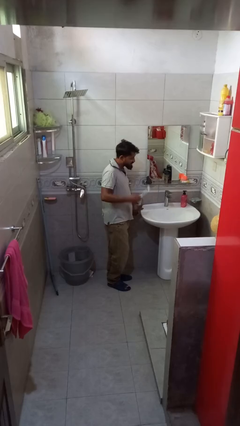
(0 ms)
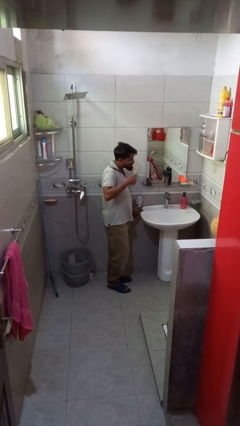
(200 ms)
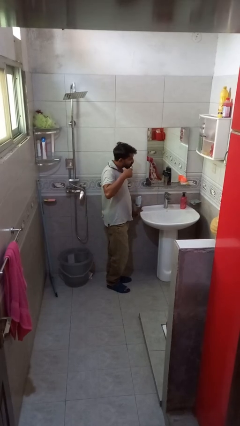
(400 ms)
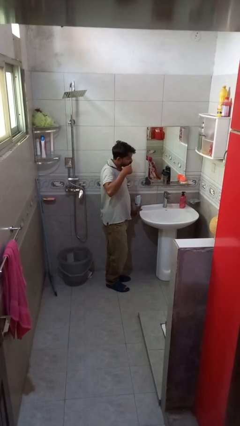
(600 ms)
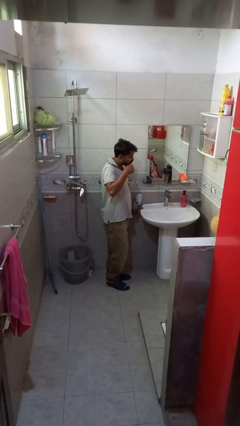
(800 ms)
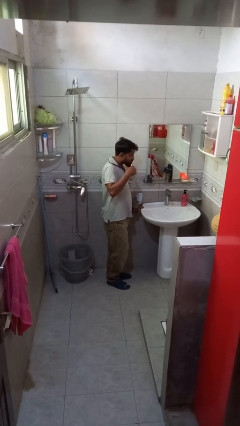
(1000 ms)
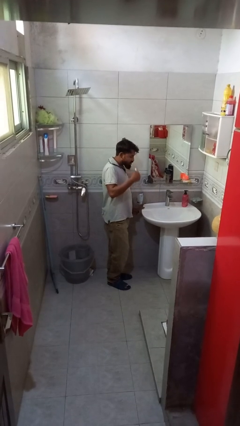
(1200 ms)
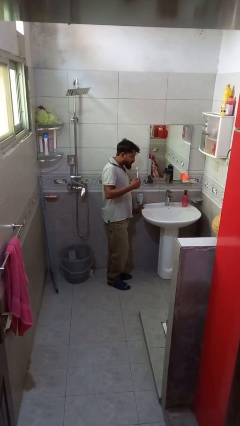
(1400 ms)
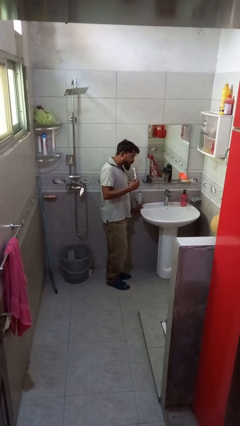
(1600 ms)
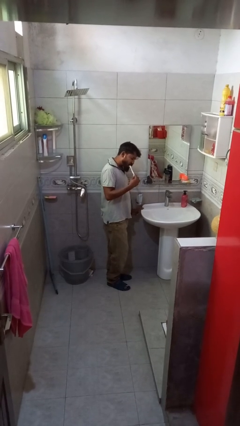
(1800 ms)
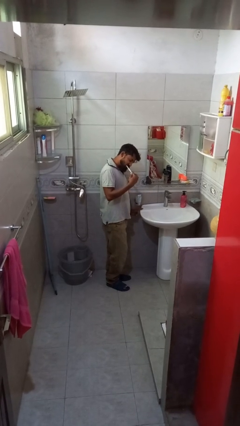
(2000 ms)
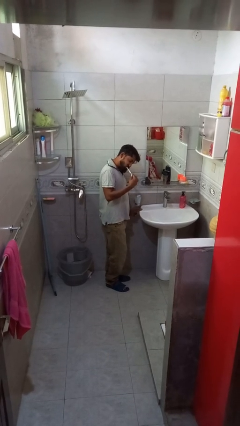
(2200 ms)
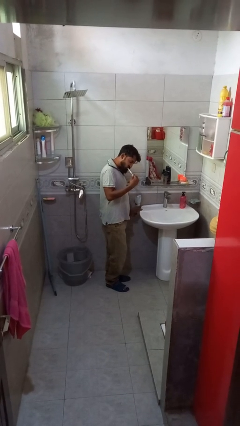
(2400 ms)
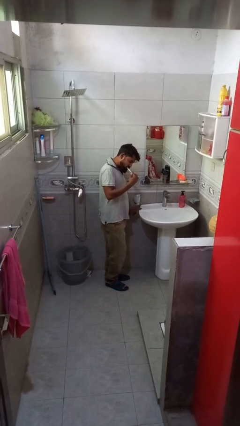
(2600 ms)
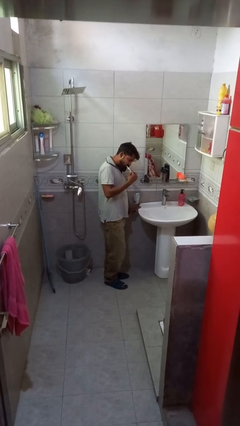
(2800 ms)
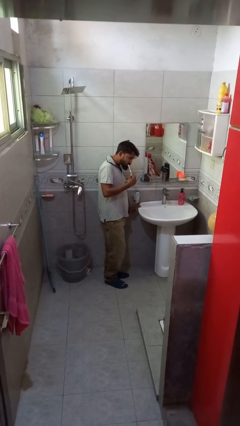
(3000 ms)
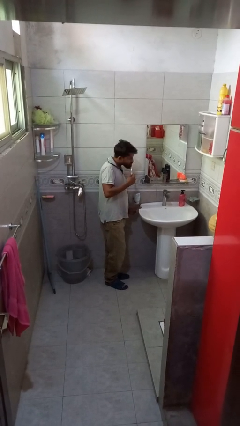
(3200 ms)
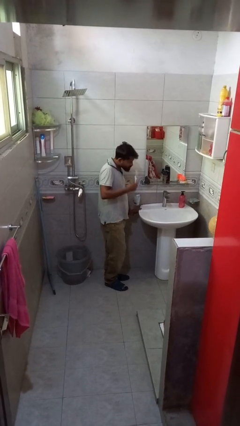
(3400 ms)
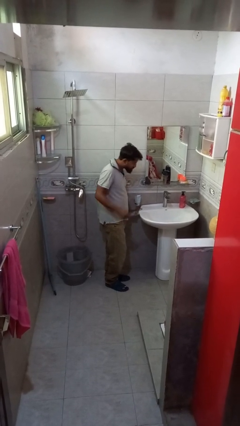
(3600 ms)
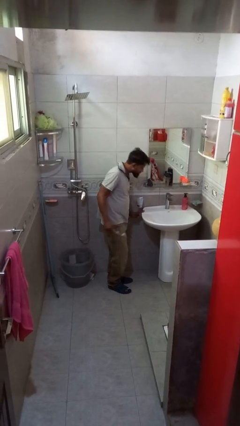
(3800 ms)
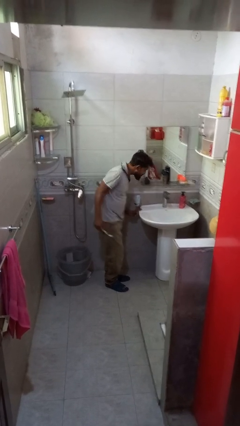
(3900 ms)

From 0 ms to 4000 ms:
person brushes teeth

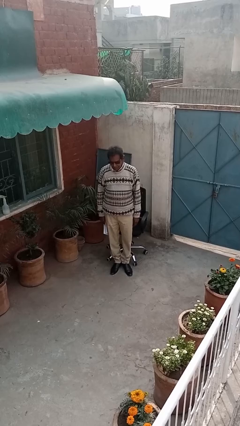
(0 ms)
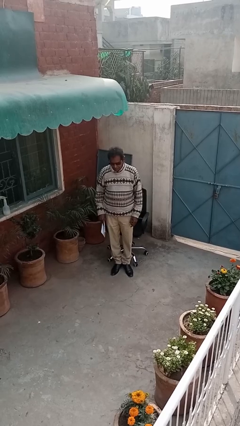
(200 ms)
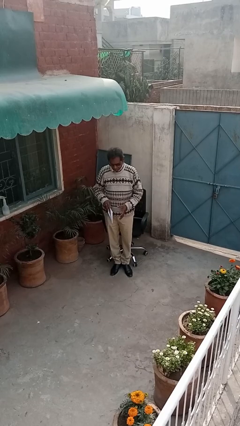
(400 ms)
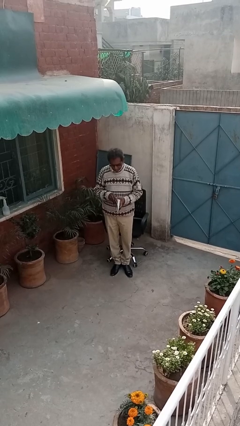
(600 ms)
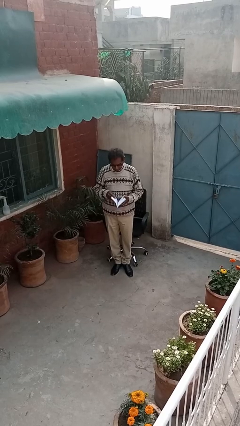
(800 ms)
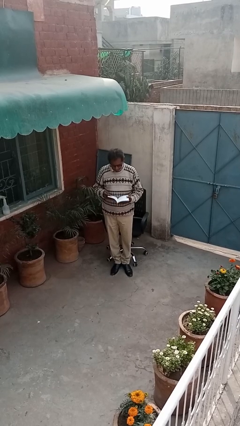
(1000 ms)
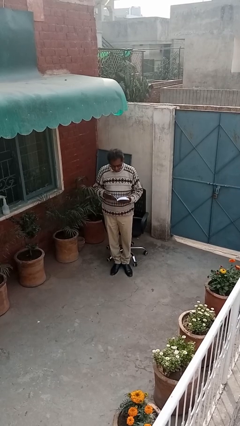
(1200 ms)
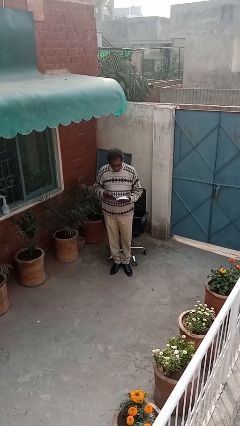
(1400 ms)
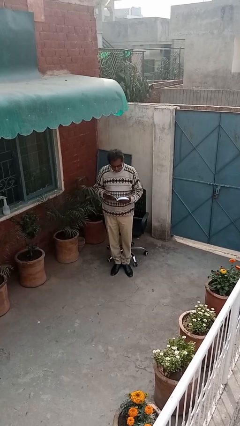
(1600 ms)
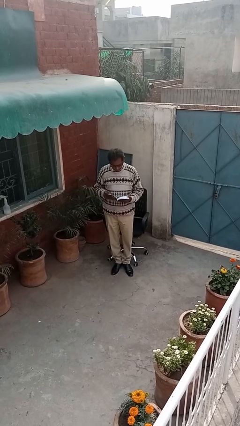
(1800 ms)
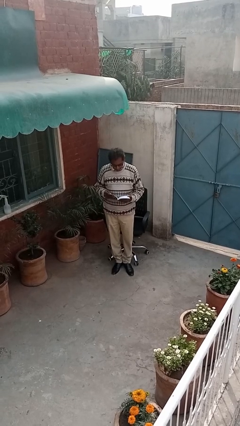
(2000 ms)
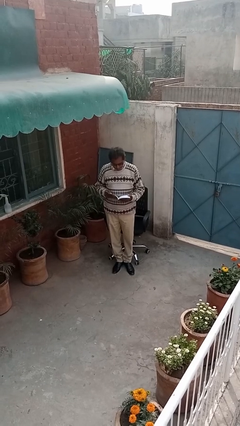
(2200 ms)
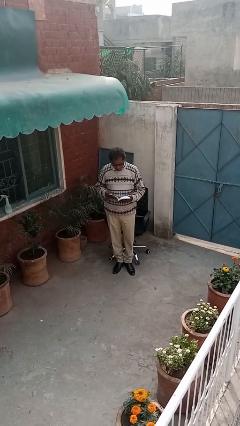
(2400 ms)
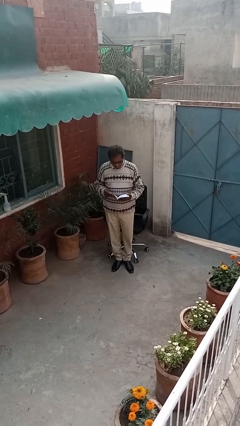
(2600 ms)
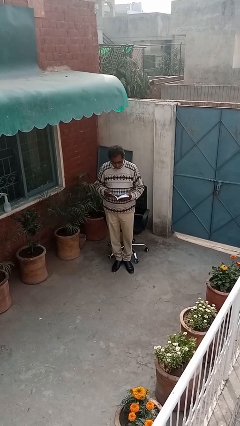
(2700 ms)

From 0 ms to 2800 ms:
person reads document

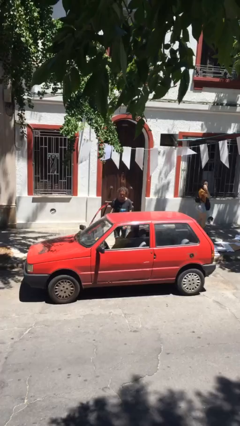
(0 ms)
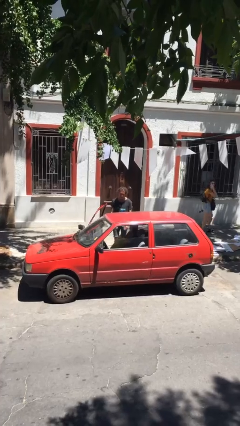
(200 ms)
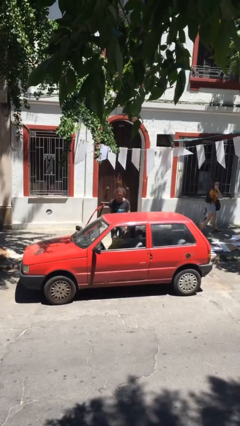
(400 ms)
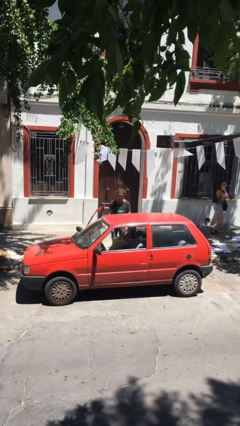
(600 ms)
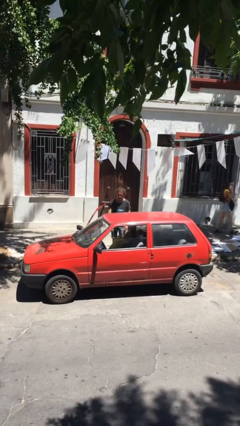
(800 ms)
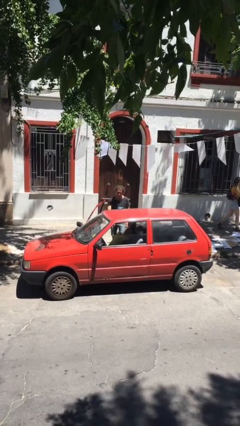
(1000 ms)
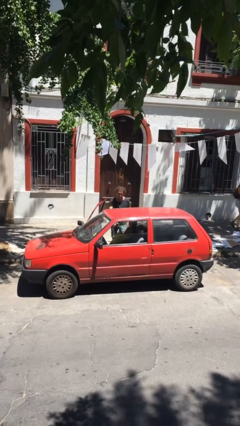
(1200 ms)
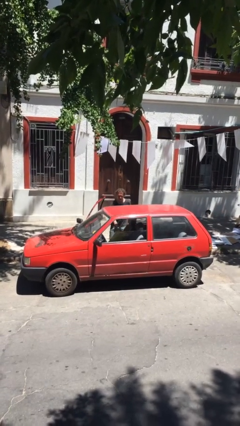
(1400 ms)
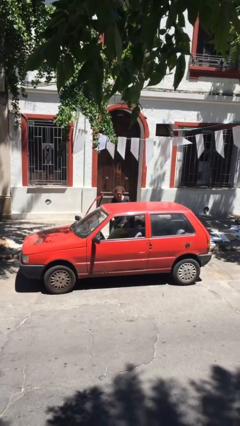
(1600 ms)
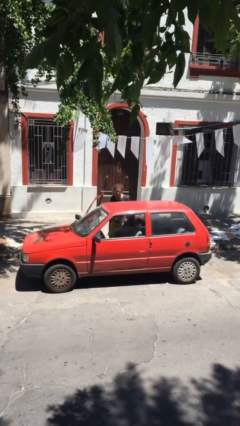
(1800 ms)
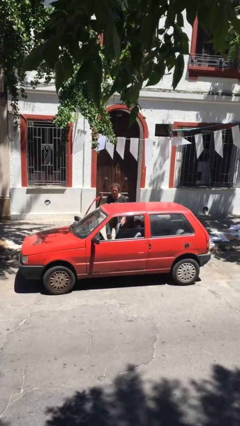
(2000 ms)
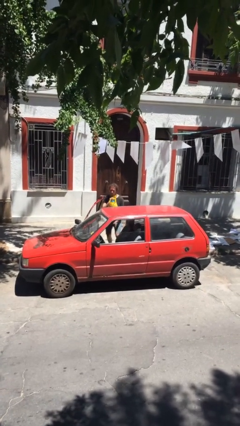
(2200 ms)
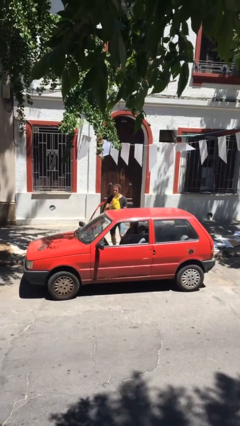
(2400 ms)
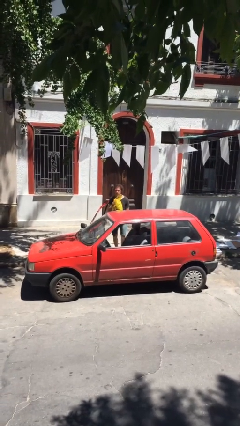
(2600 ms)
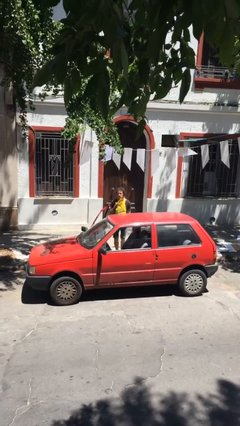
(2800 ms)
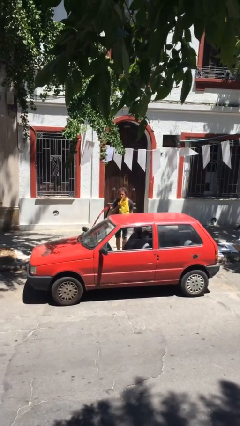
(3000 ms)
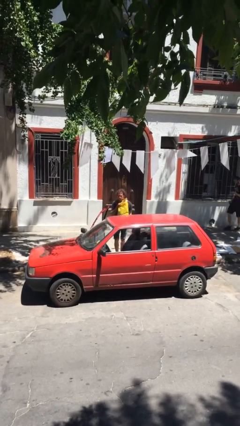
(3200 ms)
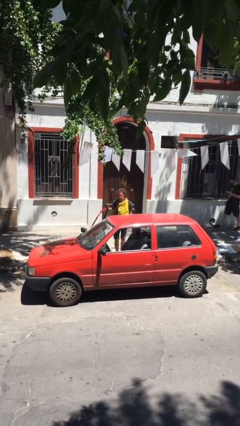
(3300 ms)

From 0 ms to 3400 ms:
person unloads car

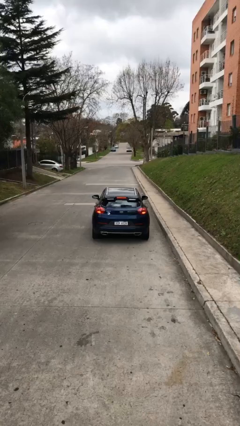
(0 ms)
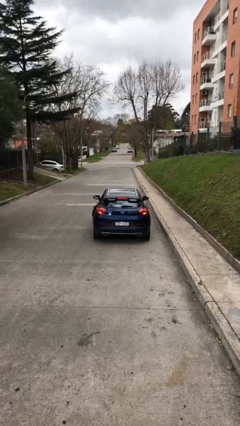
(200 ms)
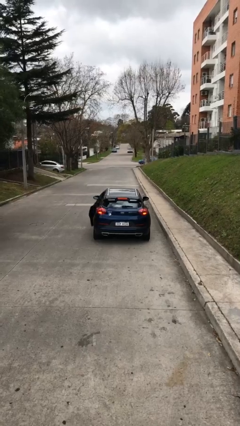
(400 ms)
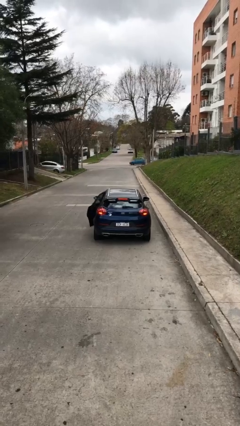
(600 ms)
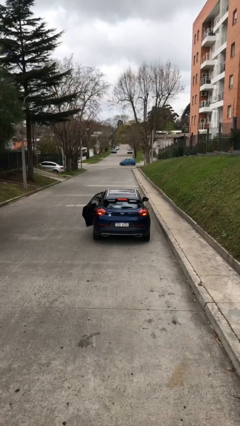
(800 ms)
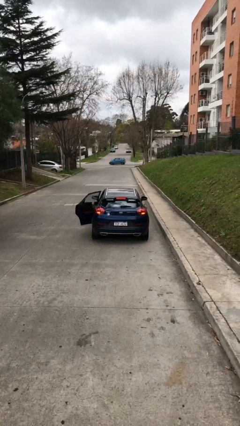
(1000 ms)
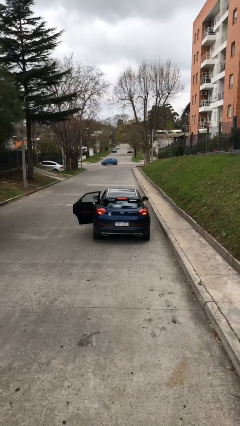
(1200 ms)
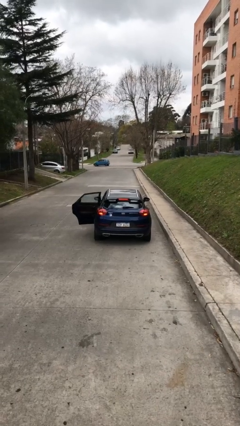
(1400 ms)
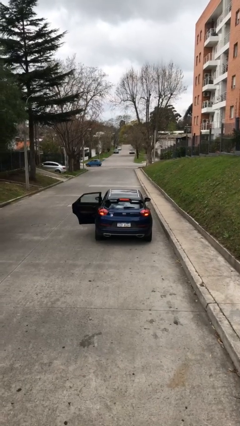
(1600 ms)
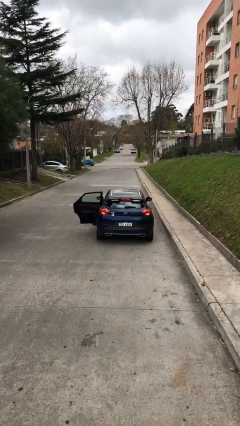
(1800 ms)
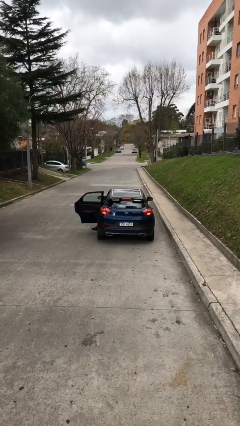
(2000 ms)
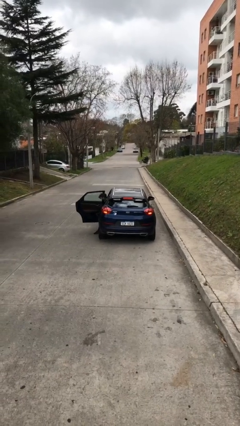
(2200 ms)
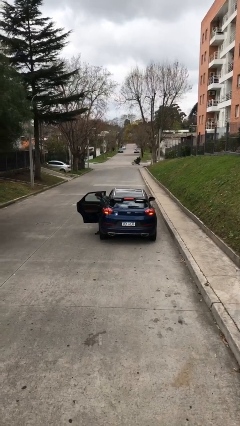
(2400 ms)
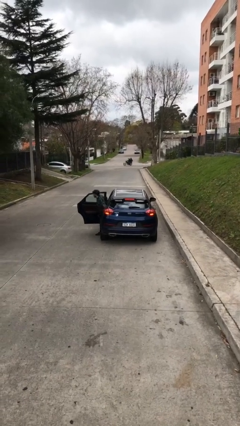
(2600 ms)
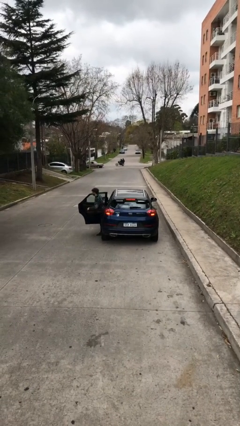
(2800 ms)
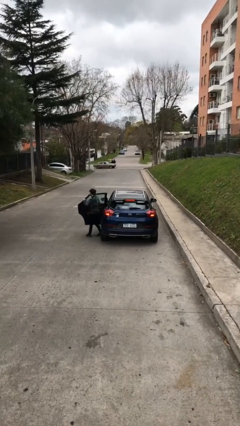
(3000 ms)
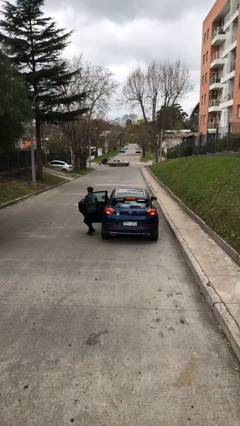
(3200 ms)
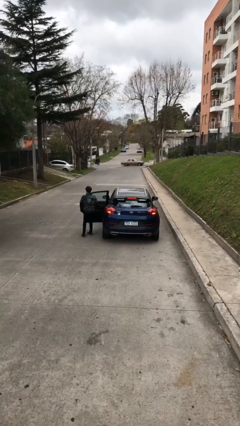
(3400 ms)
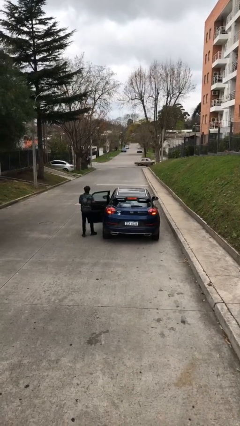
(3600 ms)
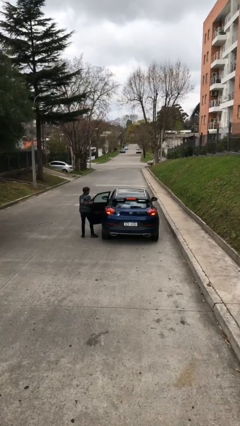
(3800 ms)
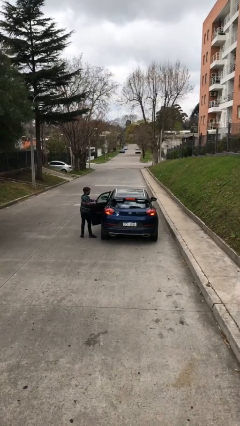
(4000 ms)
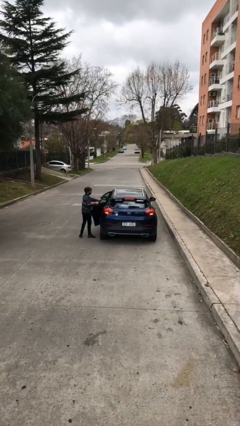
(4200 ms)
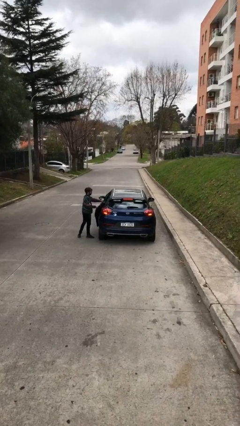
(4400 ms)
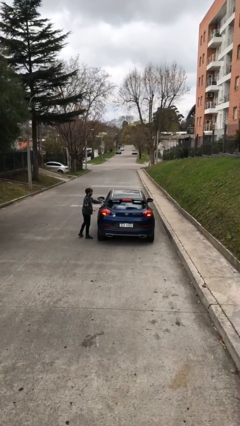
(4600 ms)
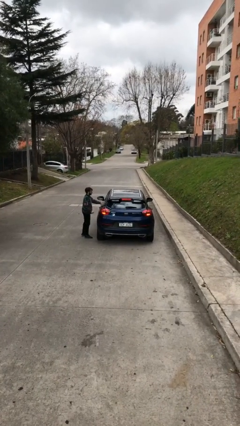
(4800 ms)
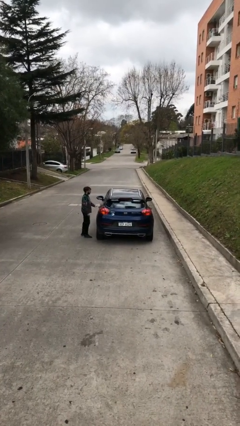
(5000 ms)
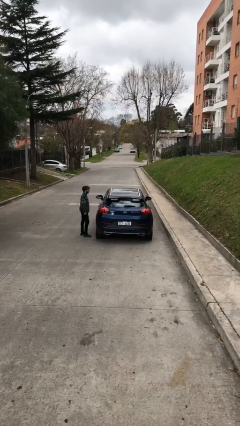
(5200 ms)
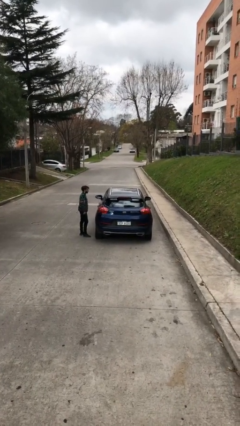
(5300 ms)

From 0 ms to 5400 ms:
car drops off person

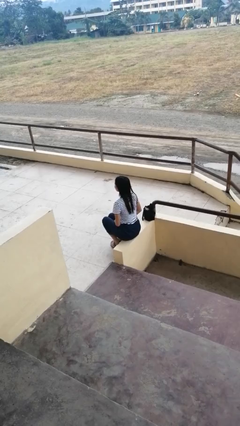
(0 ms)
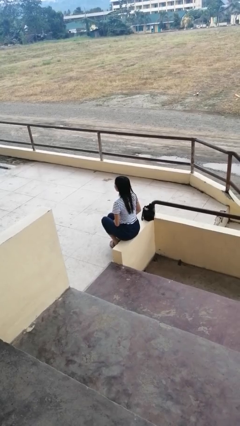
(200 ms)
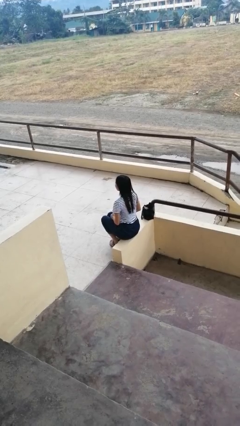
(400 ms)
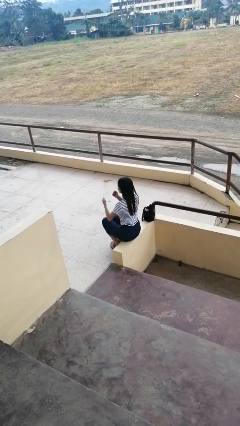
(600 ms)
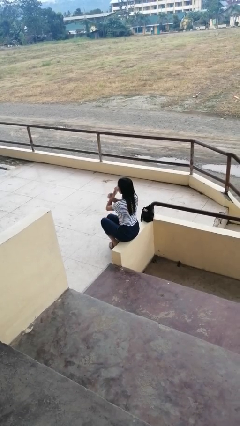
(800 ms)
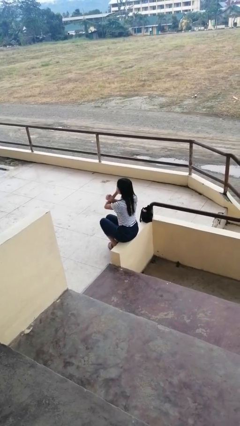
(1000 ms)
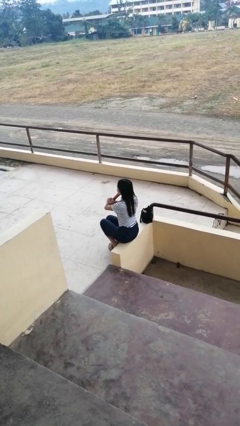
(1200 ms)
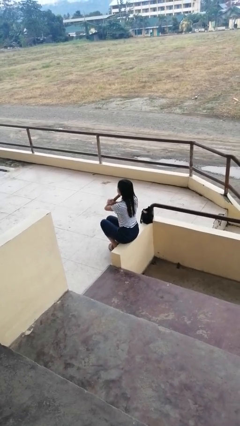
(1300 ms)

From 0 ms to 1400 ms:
person gestures arms x

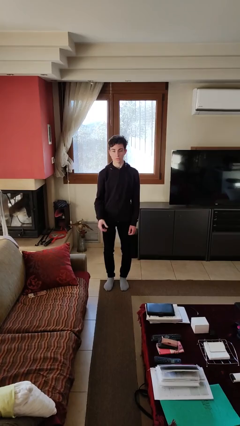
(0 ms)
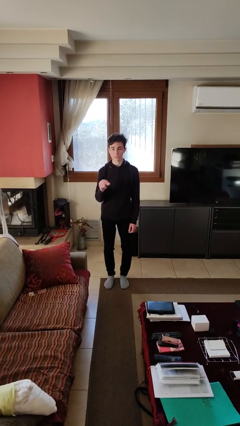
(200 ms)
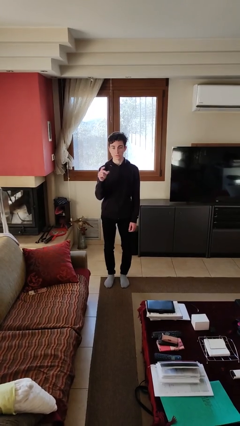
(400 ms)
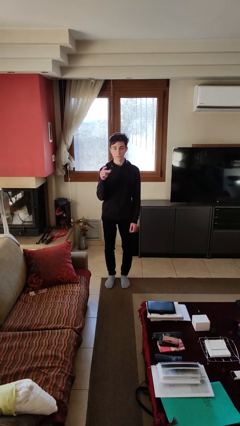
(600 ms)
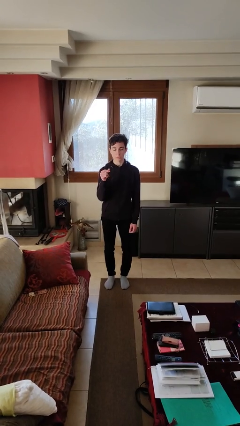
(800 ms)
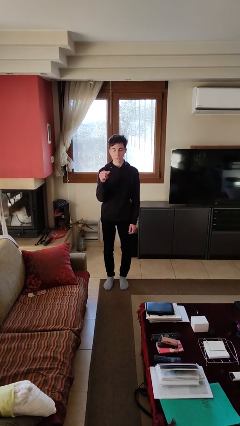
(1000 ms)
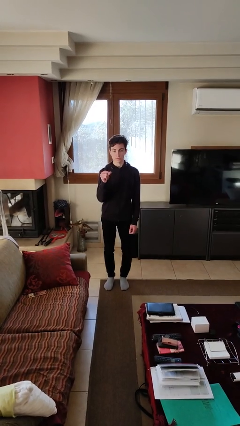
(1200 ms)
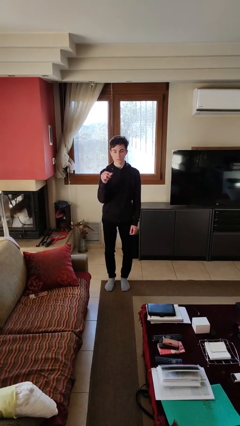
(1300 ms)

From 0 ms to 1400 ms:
person snaps fingers
